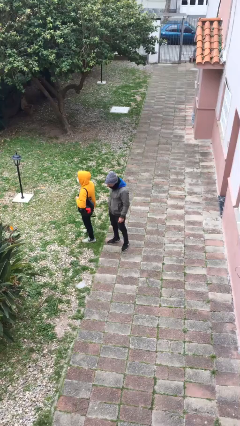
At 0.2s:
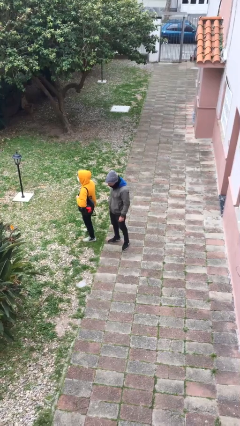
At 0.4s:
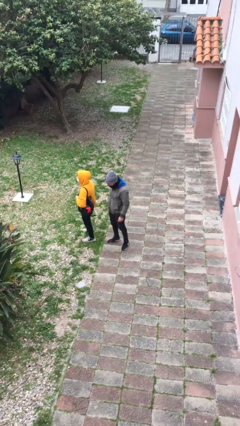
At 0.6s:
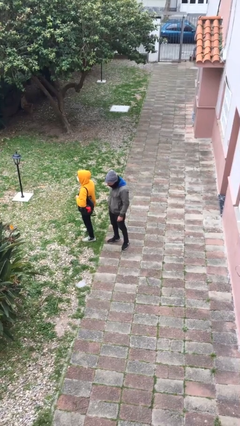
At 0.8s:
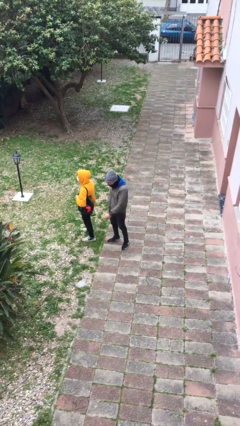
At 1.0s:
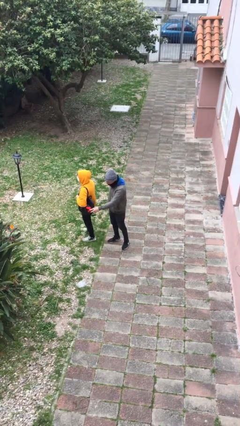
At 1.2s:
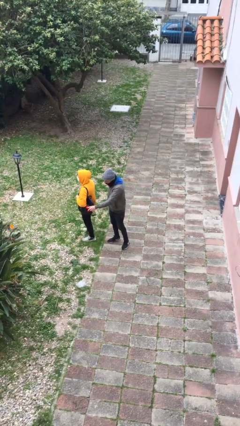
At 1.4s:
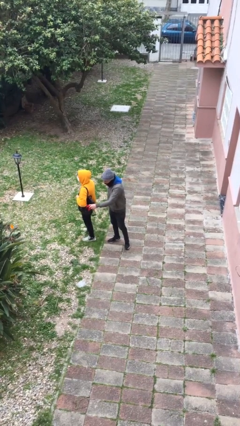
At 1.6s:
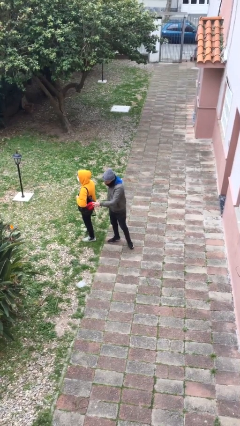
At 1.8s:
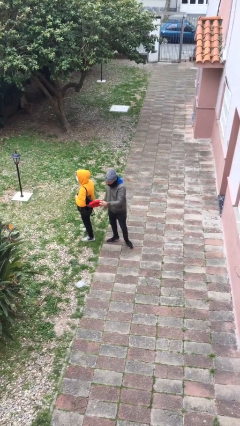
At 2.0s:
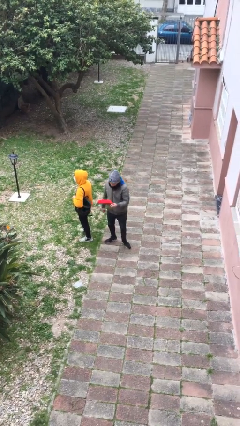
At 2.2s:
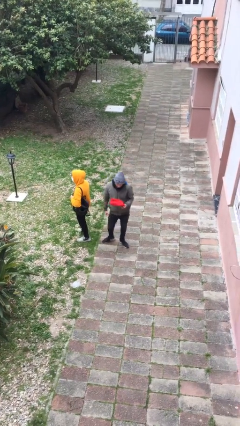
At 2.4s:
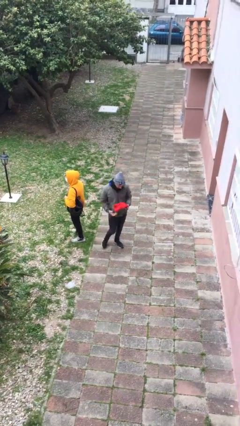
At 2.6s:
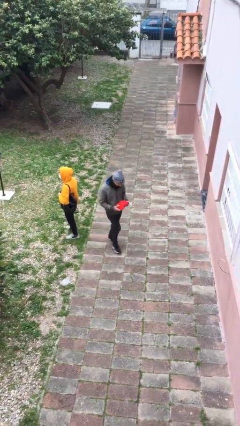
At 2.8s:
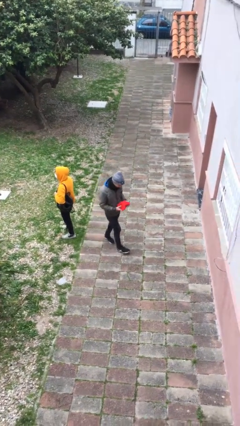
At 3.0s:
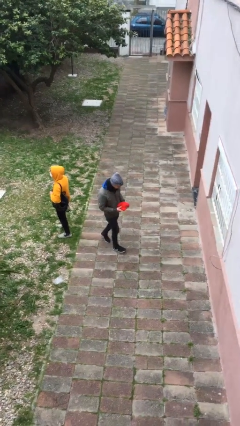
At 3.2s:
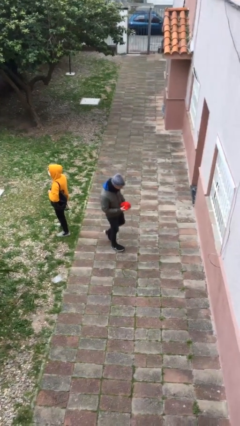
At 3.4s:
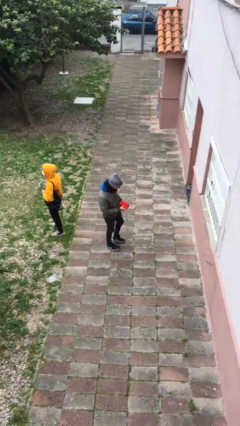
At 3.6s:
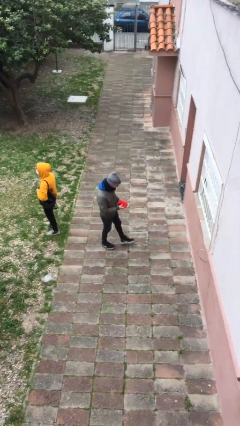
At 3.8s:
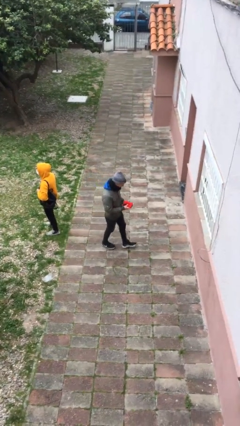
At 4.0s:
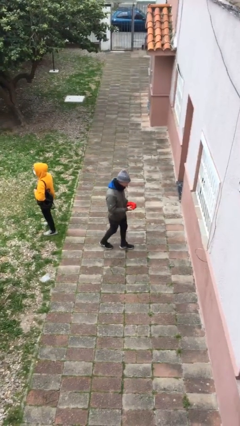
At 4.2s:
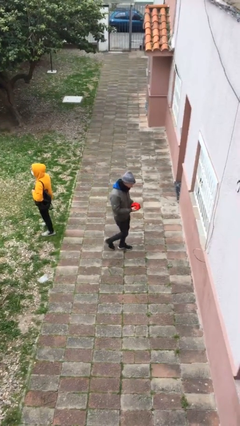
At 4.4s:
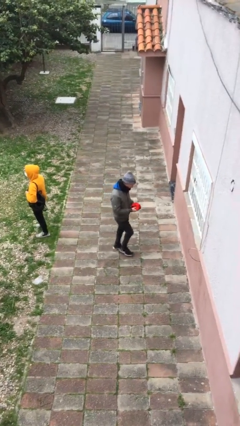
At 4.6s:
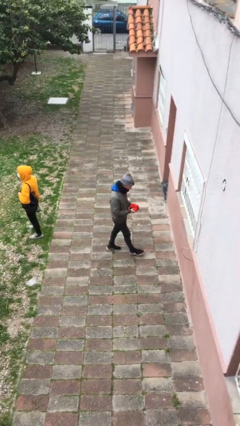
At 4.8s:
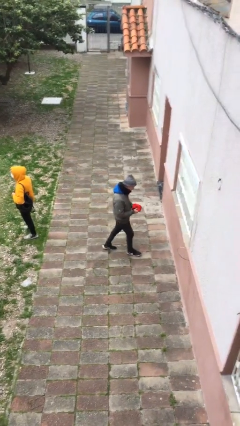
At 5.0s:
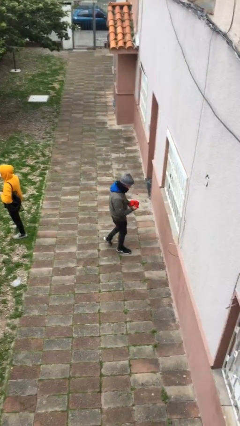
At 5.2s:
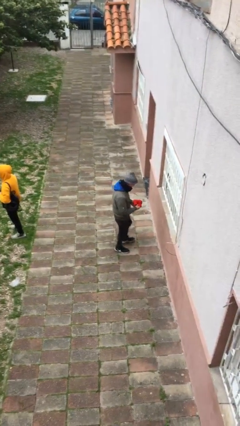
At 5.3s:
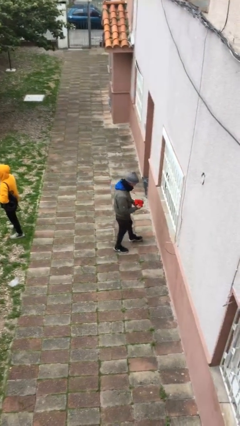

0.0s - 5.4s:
person steals object from person

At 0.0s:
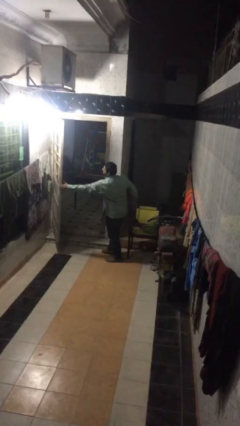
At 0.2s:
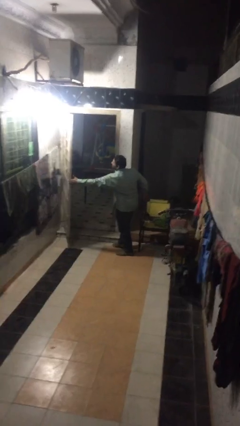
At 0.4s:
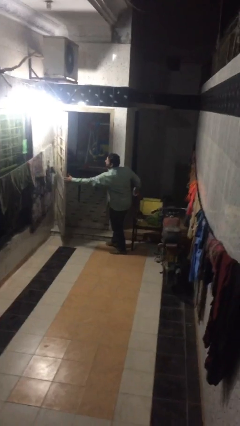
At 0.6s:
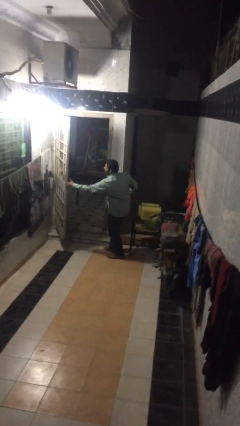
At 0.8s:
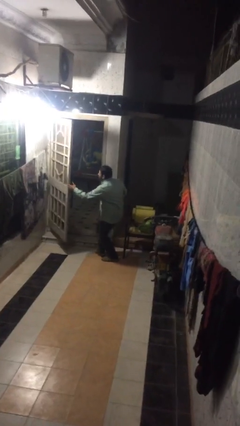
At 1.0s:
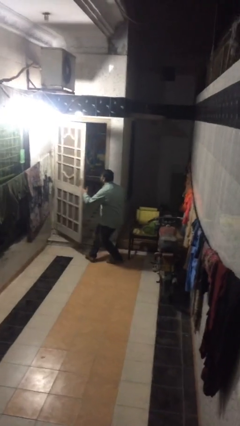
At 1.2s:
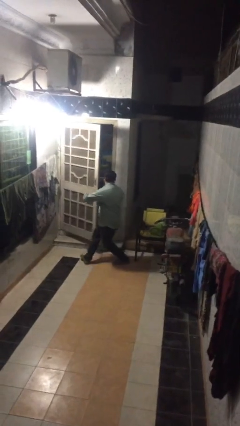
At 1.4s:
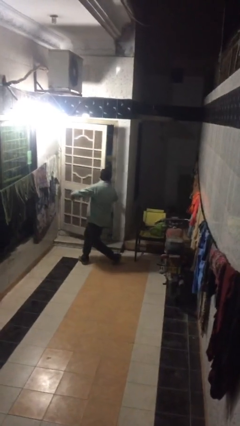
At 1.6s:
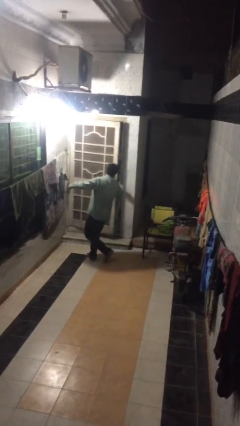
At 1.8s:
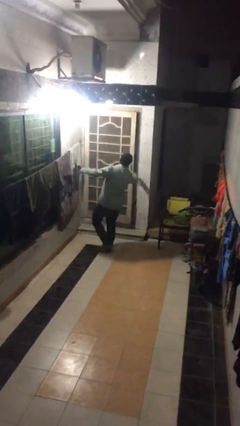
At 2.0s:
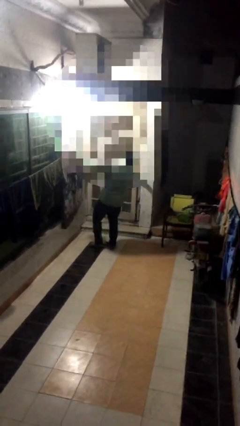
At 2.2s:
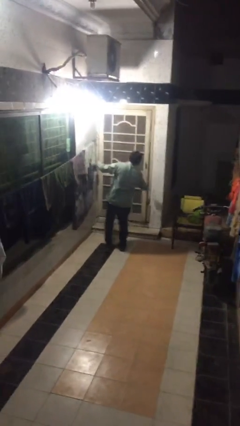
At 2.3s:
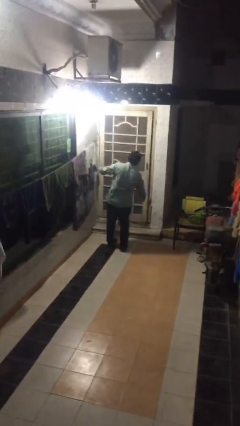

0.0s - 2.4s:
person closes facility door

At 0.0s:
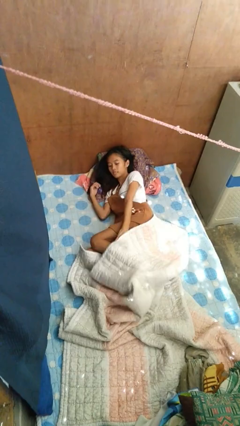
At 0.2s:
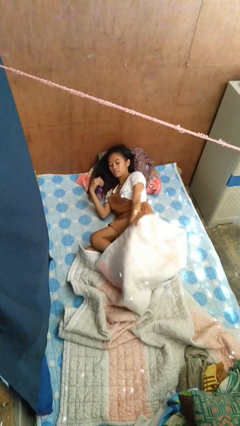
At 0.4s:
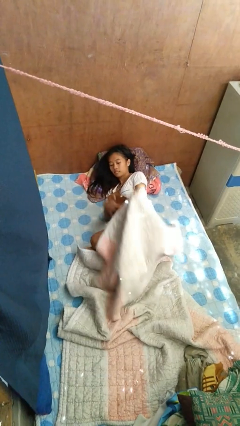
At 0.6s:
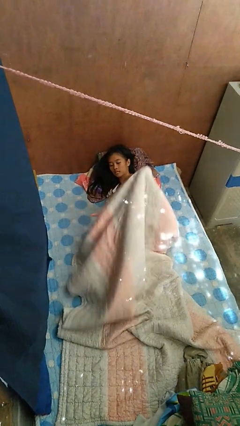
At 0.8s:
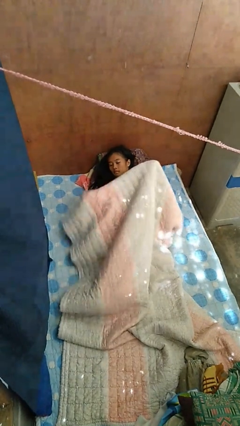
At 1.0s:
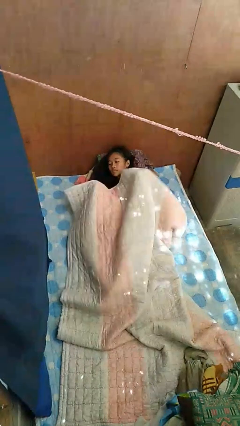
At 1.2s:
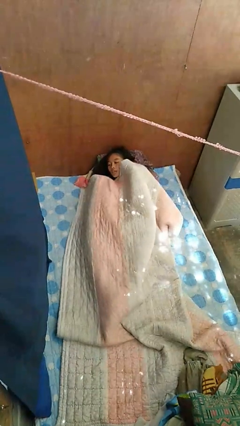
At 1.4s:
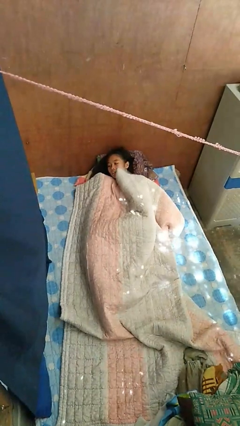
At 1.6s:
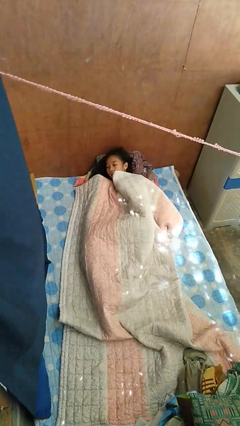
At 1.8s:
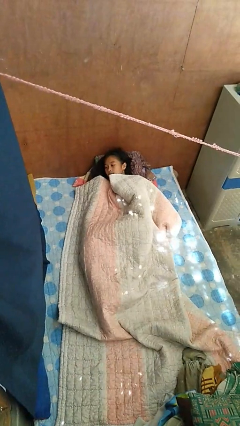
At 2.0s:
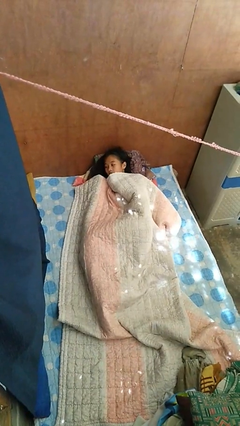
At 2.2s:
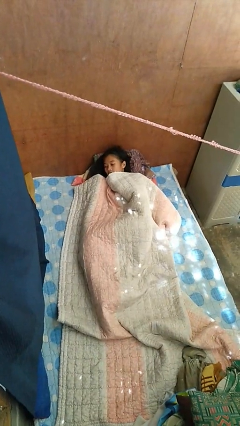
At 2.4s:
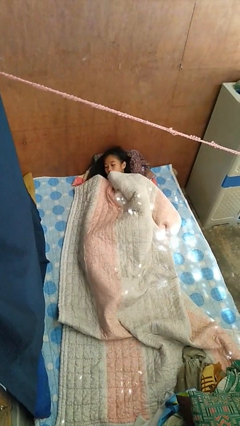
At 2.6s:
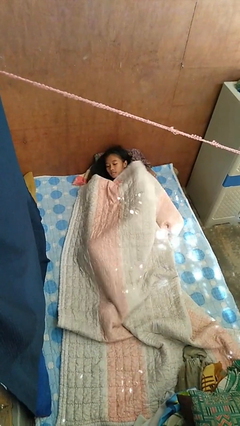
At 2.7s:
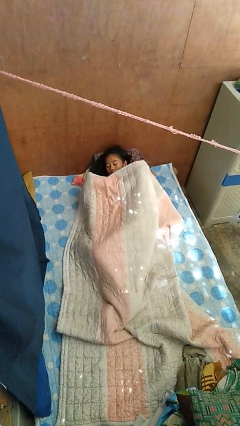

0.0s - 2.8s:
person covers with bedsheets

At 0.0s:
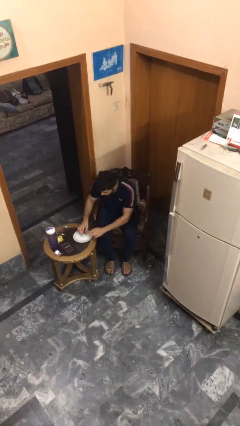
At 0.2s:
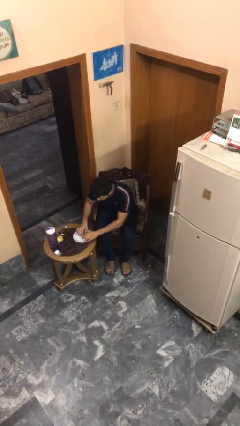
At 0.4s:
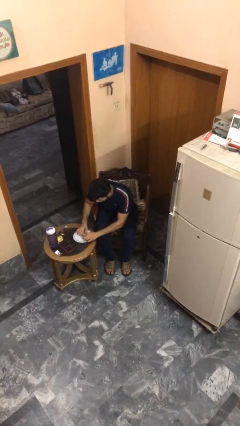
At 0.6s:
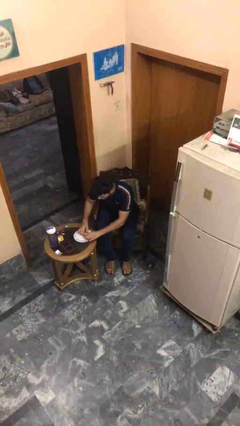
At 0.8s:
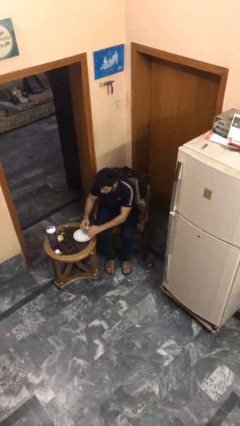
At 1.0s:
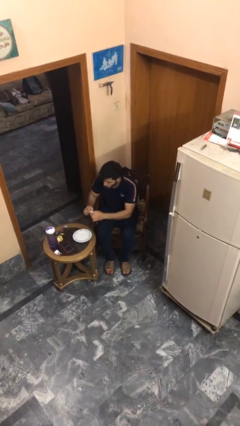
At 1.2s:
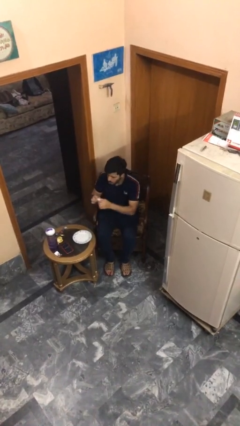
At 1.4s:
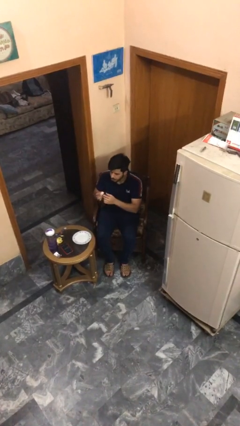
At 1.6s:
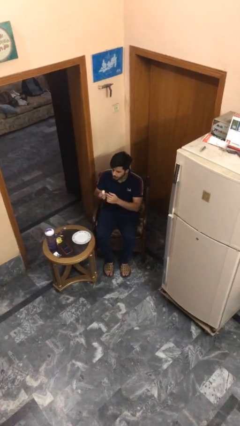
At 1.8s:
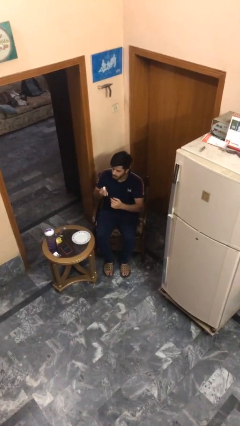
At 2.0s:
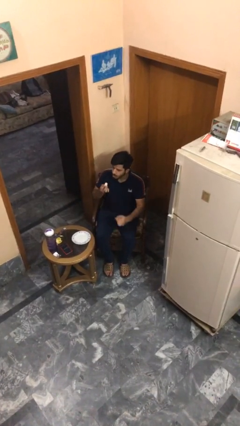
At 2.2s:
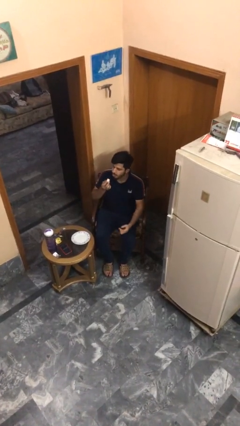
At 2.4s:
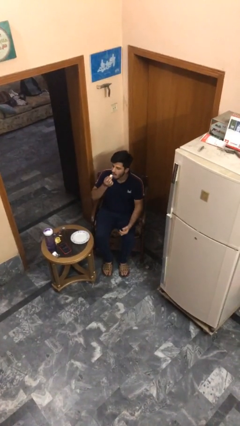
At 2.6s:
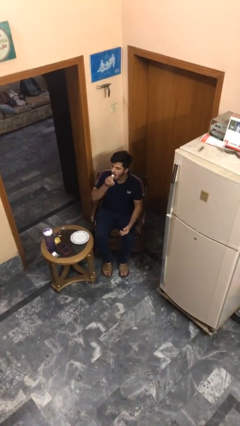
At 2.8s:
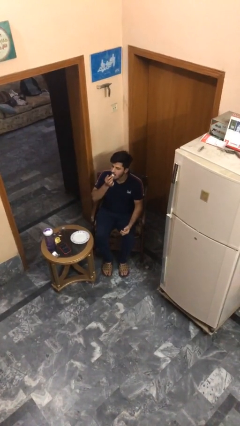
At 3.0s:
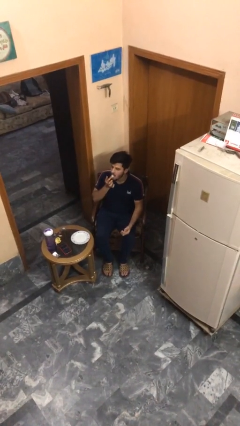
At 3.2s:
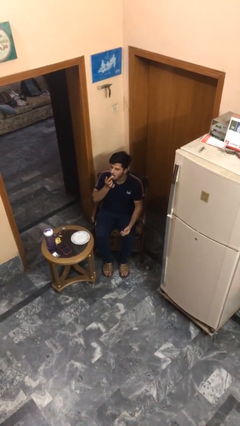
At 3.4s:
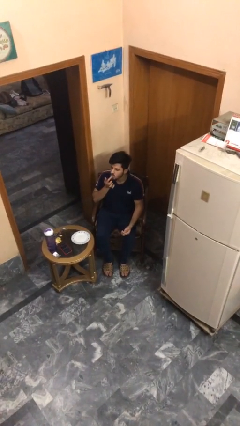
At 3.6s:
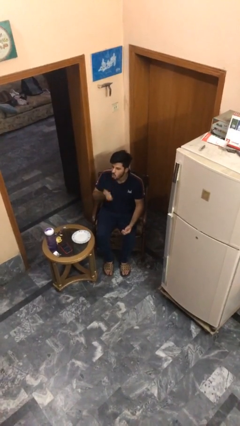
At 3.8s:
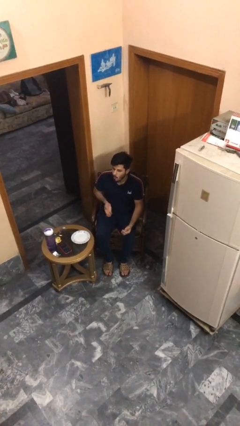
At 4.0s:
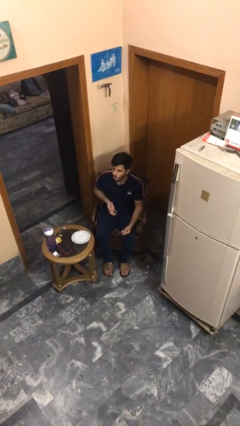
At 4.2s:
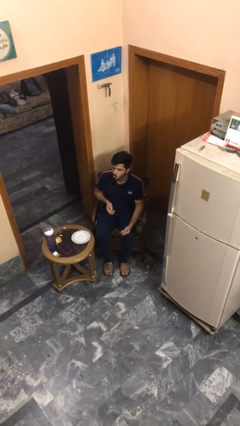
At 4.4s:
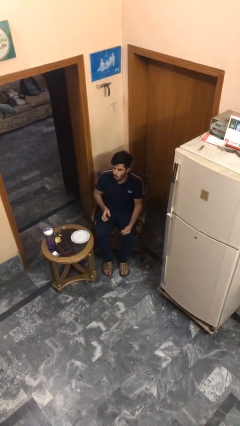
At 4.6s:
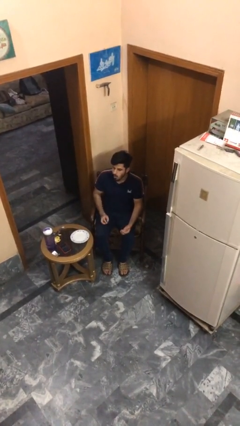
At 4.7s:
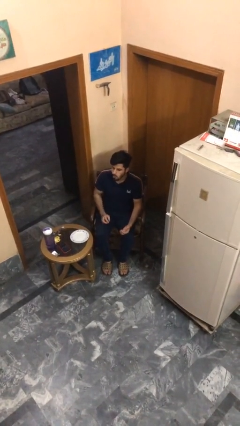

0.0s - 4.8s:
person eats with hands

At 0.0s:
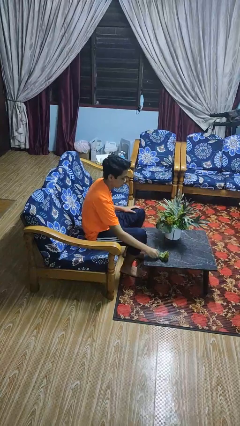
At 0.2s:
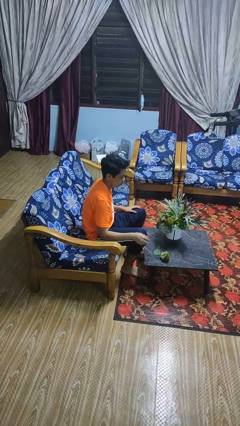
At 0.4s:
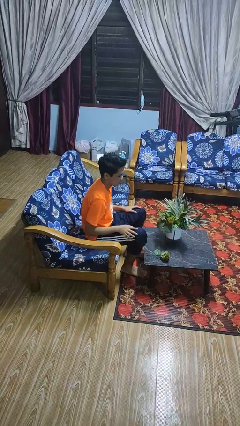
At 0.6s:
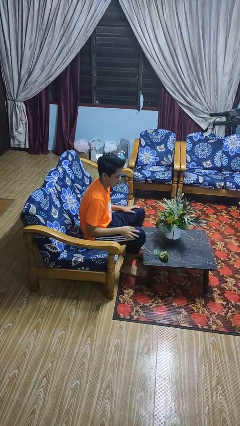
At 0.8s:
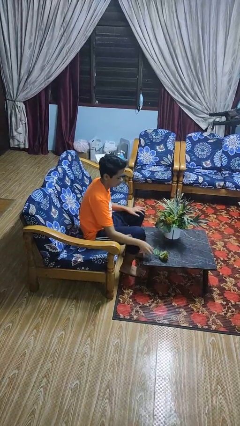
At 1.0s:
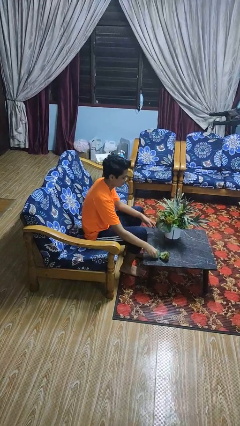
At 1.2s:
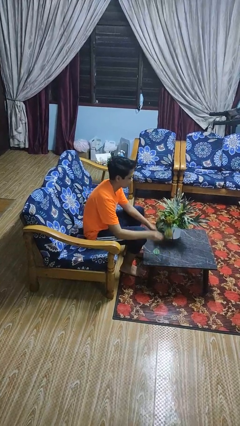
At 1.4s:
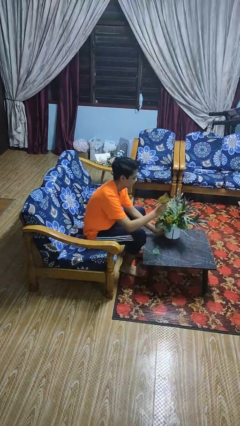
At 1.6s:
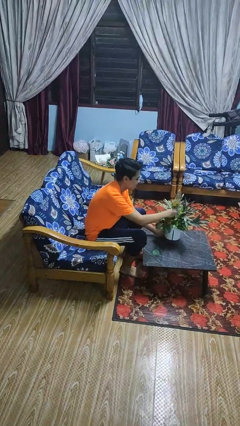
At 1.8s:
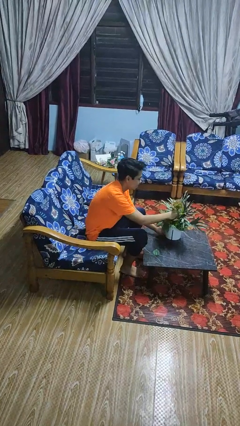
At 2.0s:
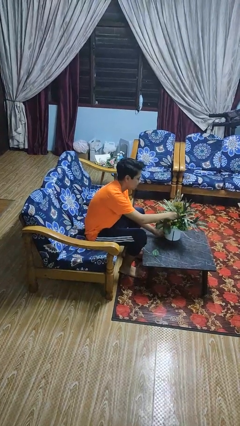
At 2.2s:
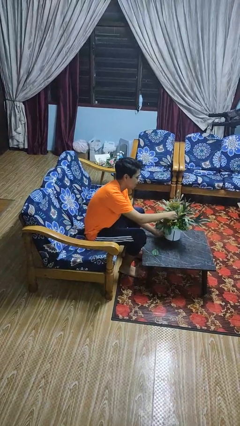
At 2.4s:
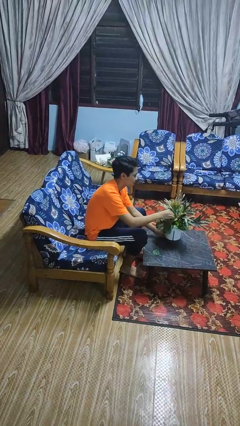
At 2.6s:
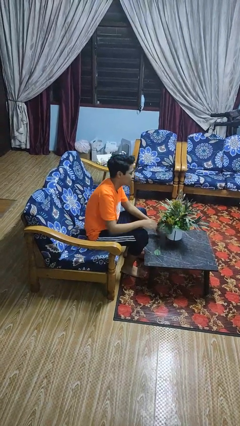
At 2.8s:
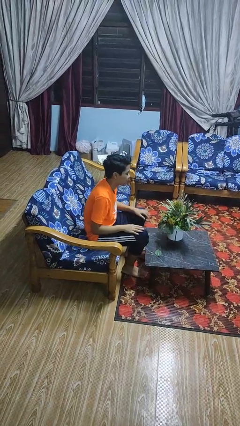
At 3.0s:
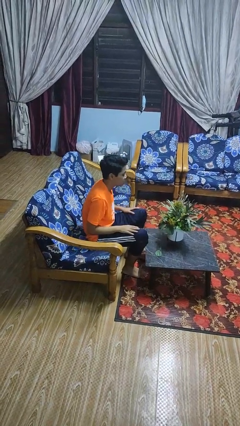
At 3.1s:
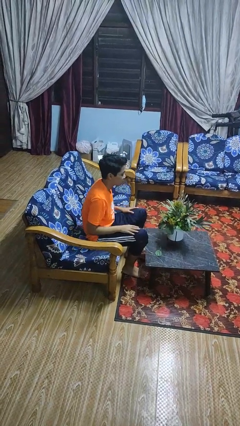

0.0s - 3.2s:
person arranges flowers in vase
